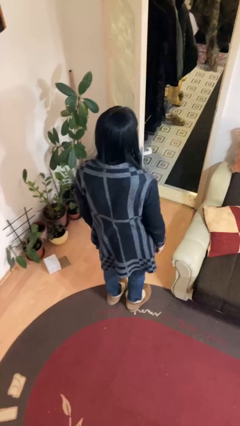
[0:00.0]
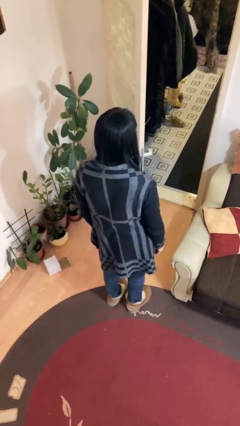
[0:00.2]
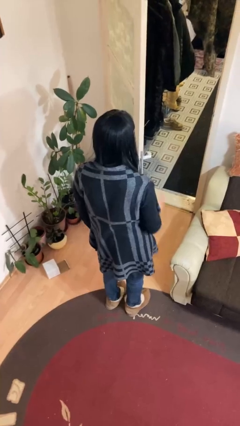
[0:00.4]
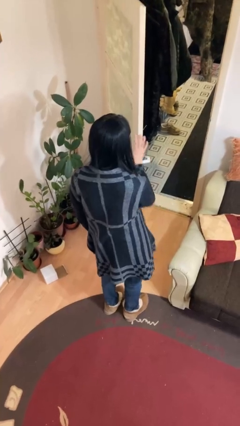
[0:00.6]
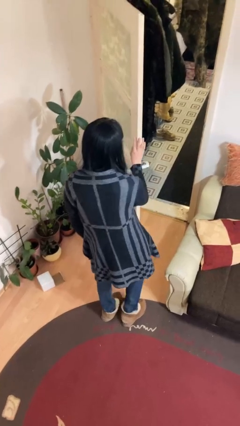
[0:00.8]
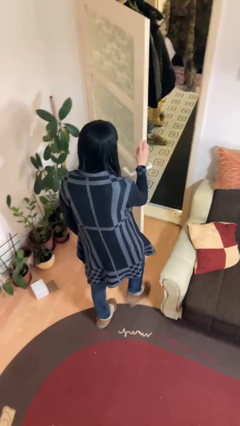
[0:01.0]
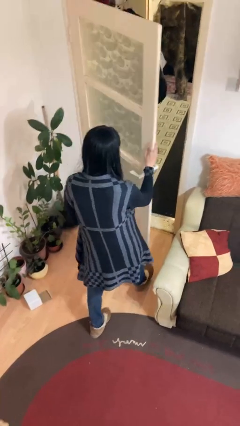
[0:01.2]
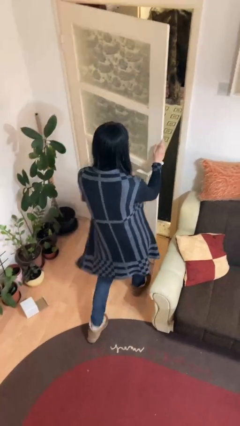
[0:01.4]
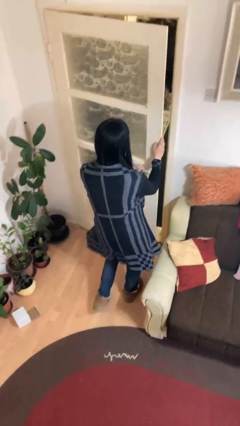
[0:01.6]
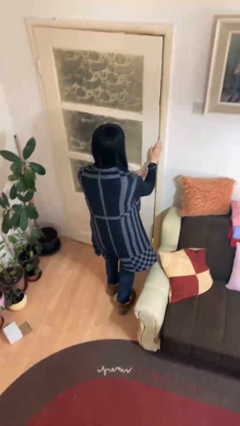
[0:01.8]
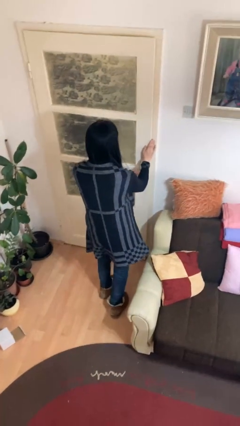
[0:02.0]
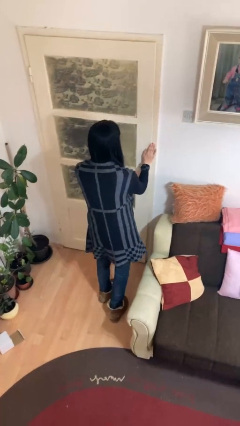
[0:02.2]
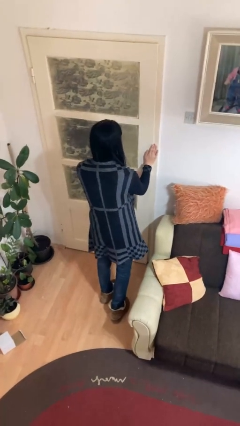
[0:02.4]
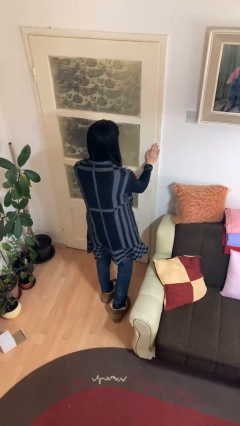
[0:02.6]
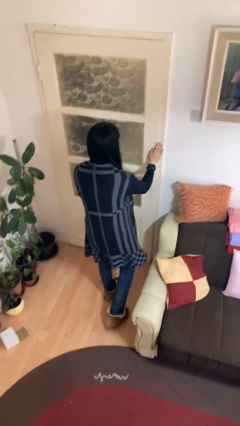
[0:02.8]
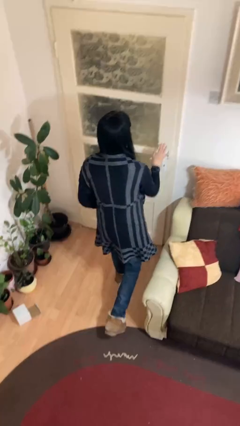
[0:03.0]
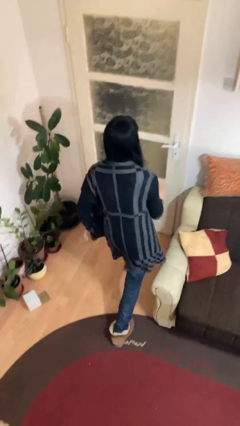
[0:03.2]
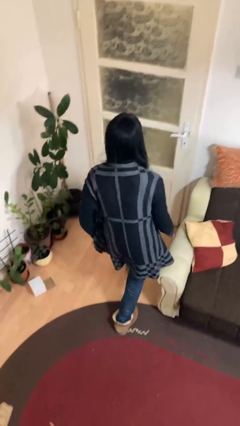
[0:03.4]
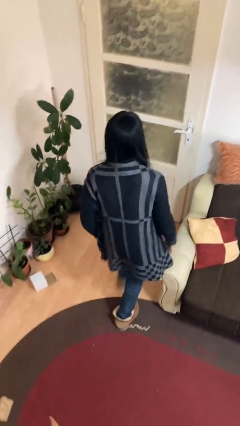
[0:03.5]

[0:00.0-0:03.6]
person closes facility door

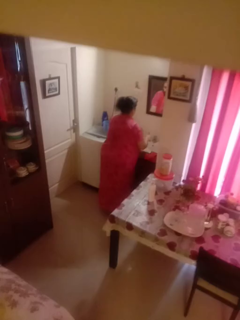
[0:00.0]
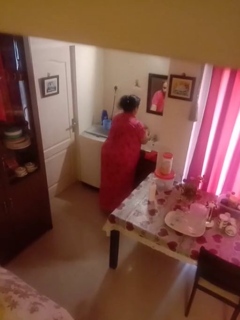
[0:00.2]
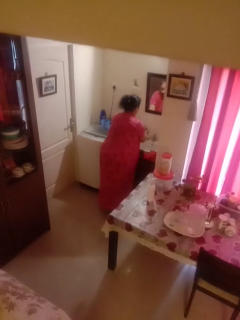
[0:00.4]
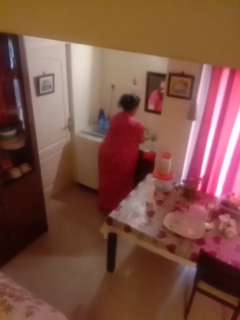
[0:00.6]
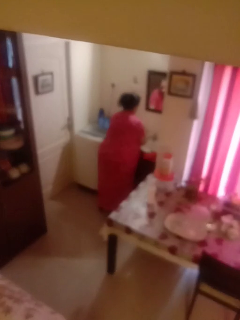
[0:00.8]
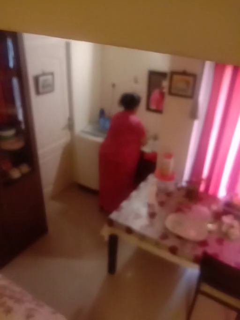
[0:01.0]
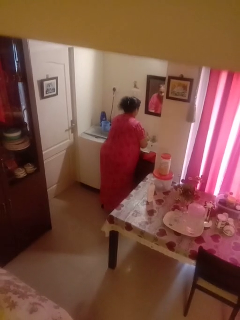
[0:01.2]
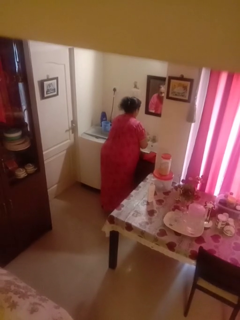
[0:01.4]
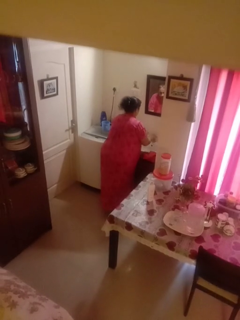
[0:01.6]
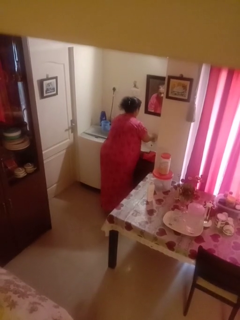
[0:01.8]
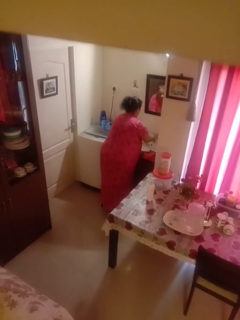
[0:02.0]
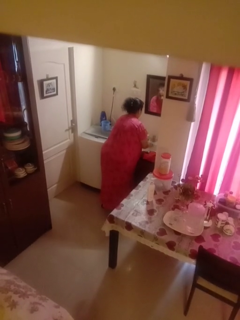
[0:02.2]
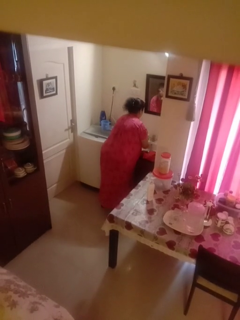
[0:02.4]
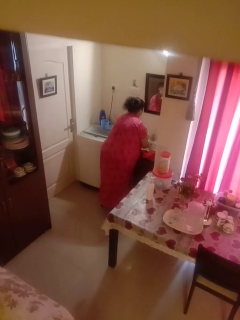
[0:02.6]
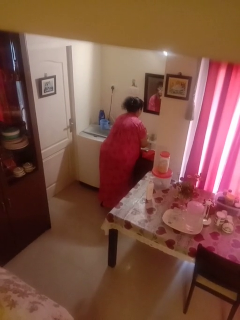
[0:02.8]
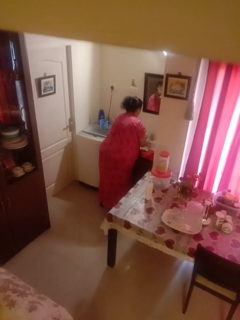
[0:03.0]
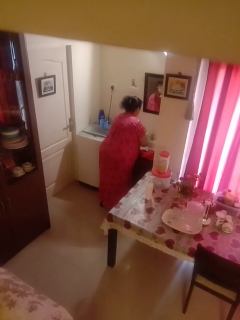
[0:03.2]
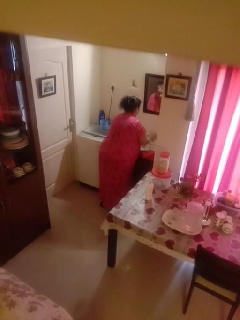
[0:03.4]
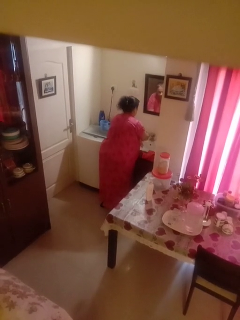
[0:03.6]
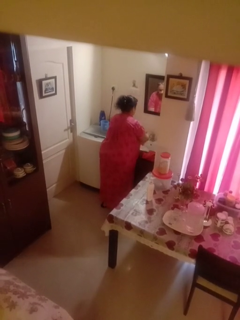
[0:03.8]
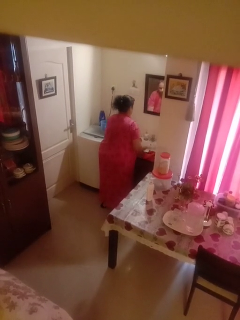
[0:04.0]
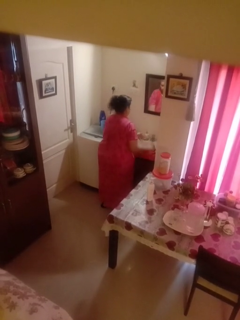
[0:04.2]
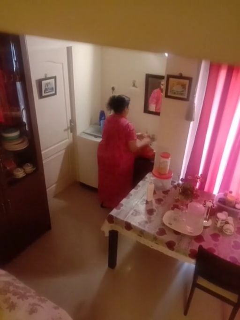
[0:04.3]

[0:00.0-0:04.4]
person washes hands

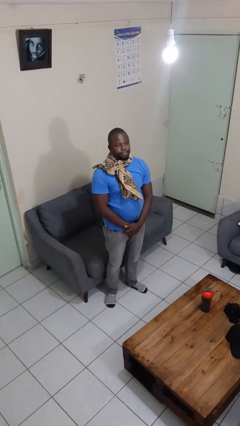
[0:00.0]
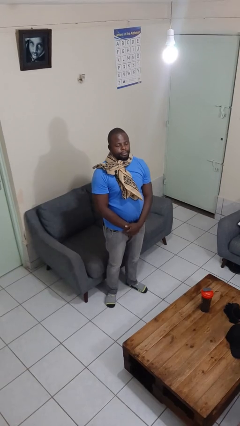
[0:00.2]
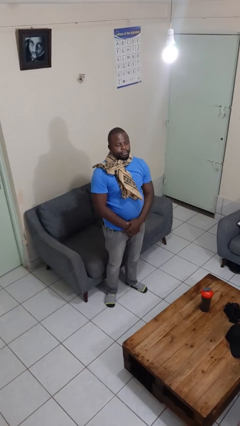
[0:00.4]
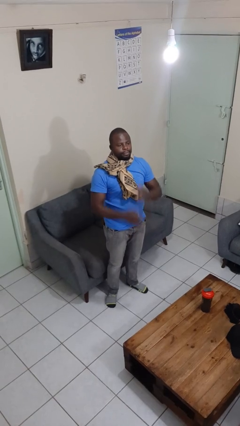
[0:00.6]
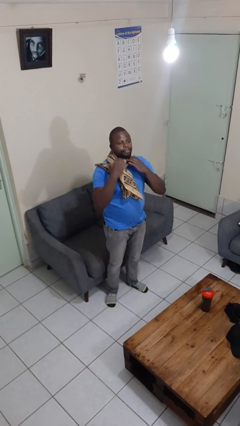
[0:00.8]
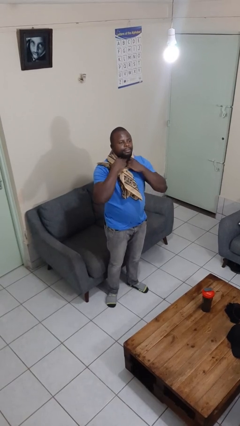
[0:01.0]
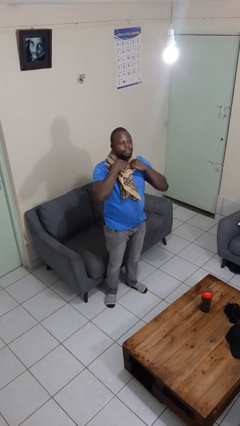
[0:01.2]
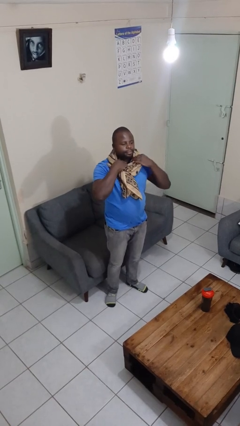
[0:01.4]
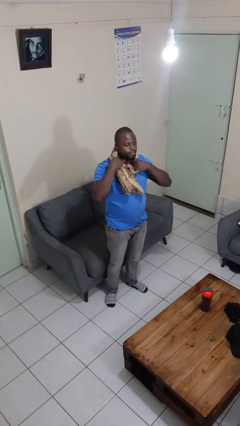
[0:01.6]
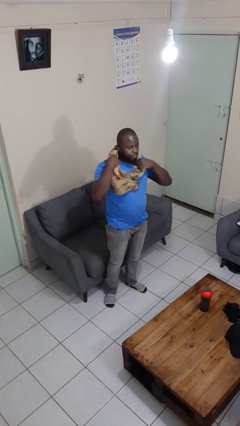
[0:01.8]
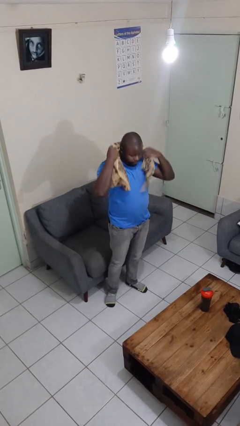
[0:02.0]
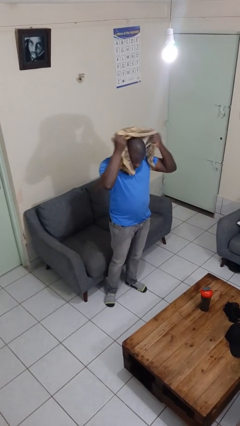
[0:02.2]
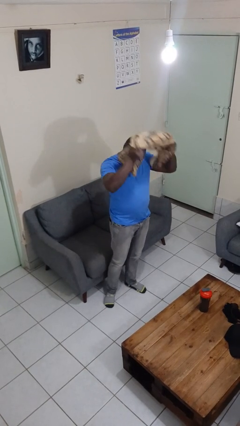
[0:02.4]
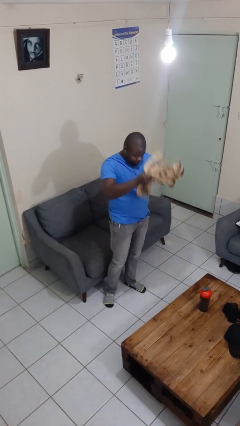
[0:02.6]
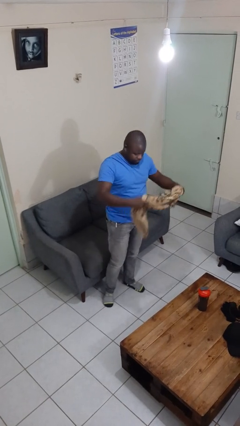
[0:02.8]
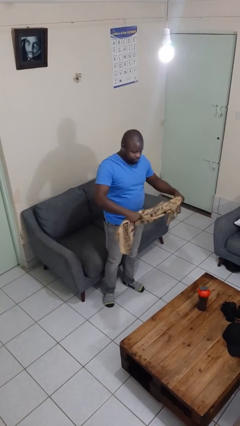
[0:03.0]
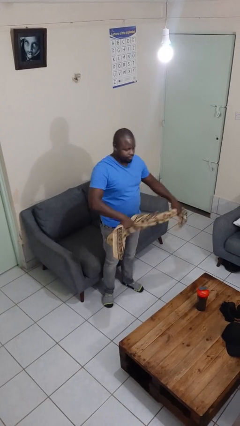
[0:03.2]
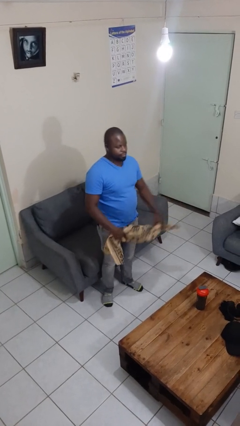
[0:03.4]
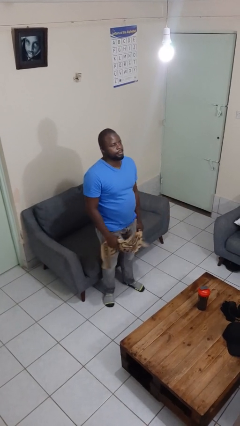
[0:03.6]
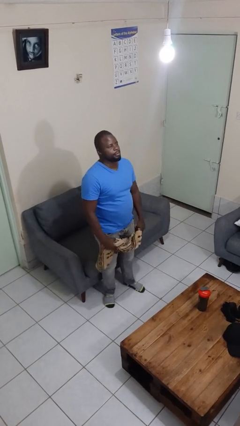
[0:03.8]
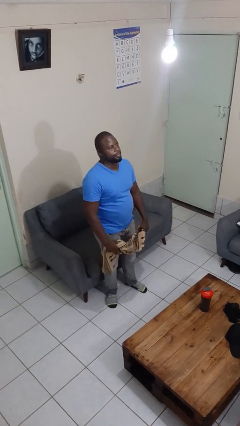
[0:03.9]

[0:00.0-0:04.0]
person takes off scarf

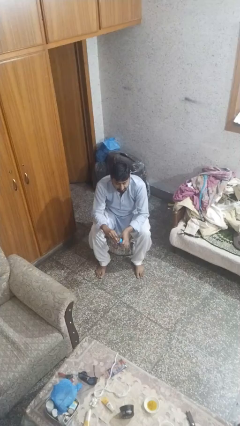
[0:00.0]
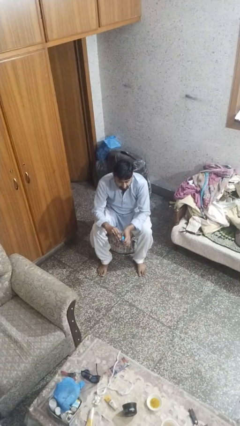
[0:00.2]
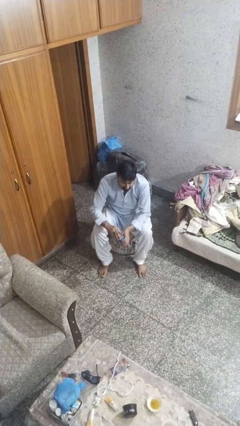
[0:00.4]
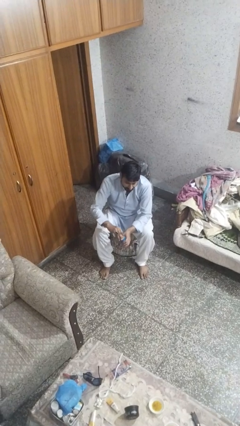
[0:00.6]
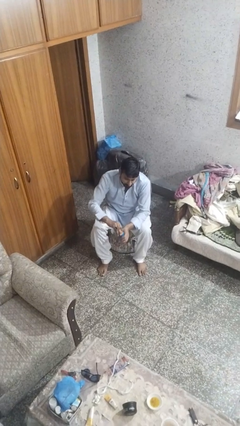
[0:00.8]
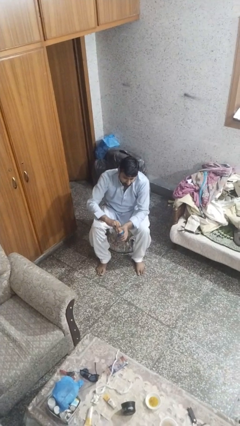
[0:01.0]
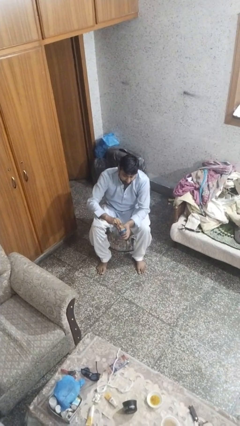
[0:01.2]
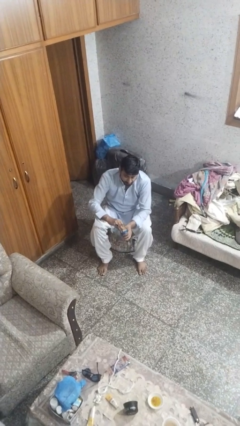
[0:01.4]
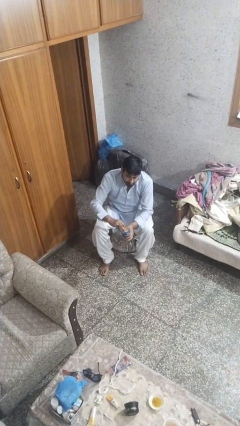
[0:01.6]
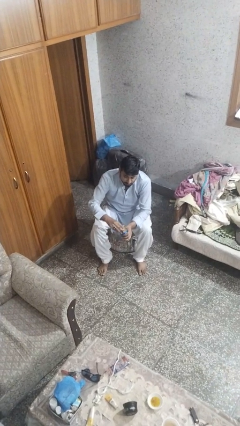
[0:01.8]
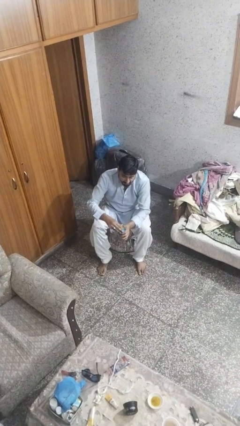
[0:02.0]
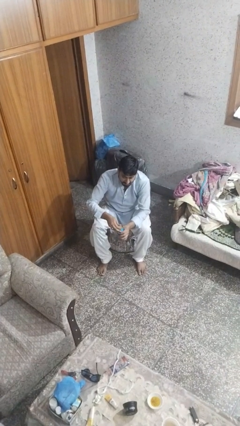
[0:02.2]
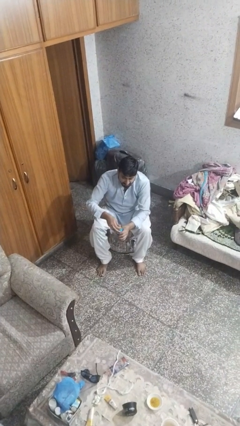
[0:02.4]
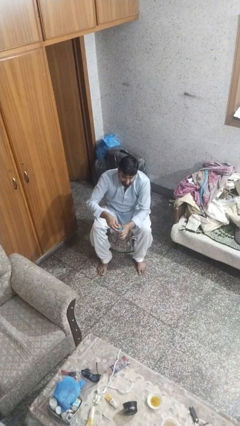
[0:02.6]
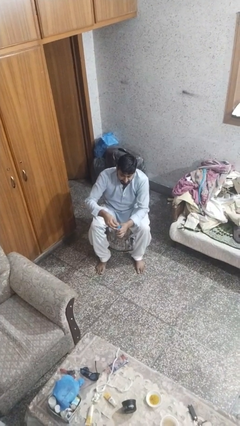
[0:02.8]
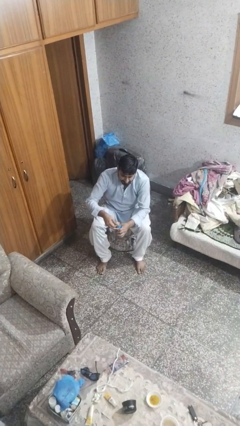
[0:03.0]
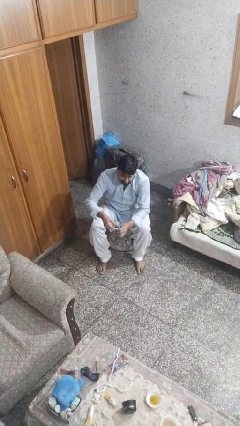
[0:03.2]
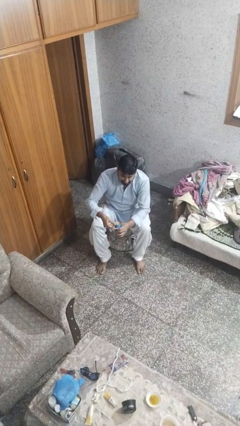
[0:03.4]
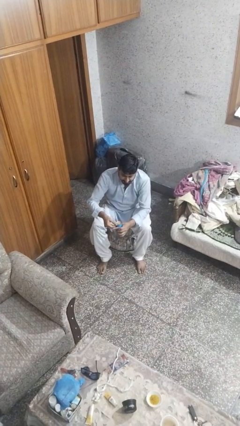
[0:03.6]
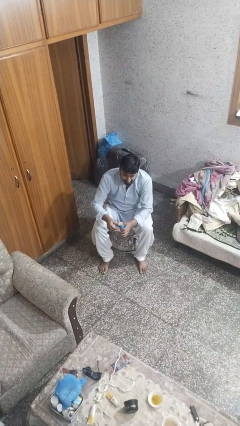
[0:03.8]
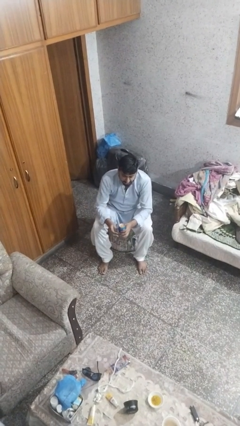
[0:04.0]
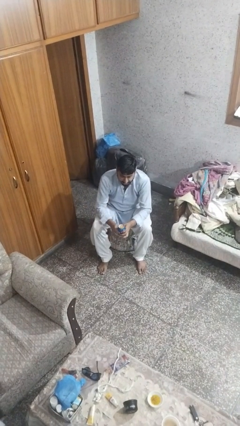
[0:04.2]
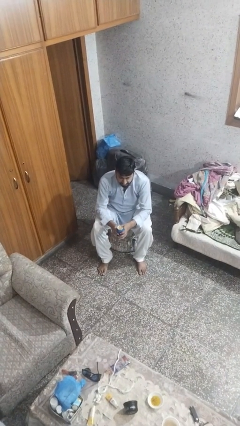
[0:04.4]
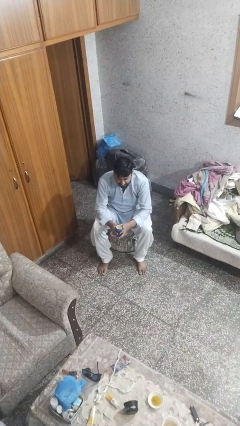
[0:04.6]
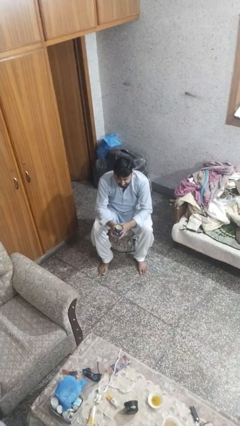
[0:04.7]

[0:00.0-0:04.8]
person opens beverage can

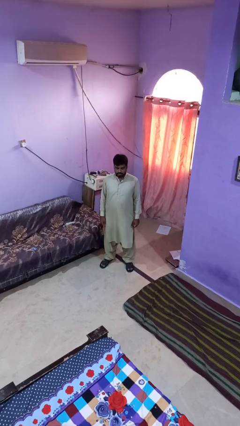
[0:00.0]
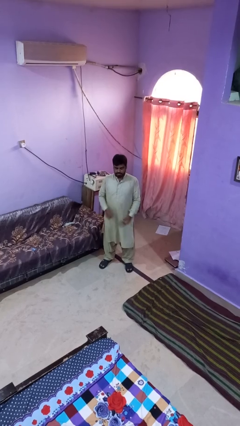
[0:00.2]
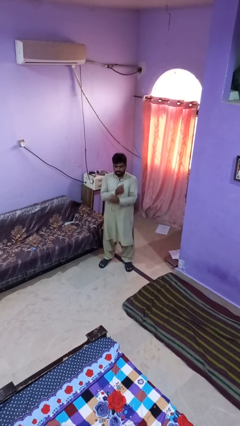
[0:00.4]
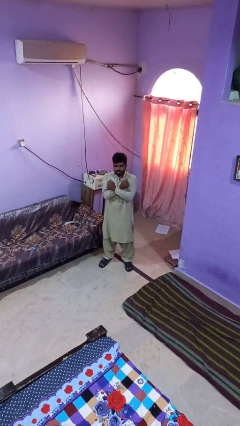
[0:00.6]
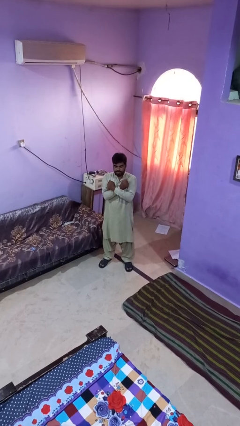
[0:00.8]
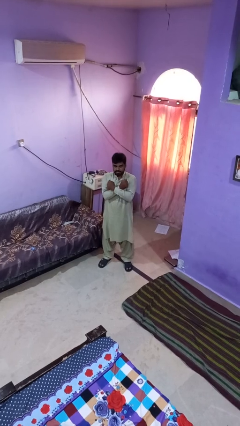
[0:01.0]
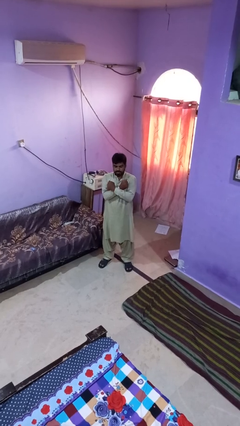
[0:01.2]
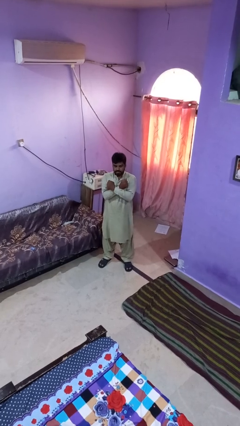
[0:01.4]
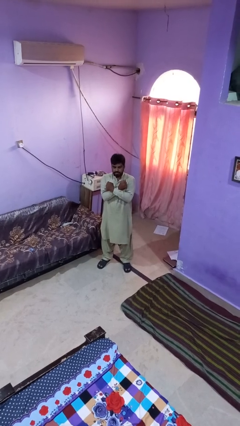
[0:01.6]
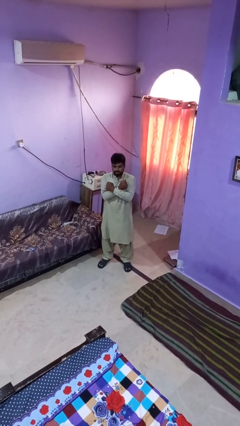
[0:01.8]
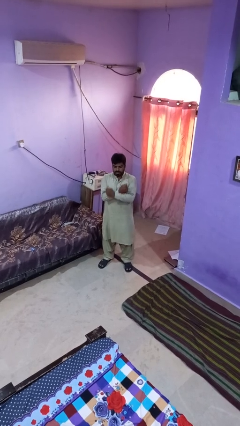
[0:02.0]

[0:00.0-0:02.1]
person gestures arms x

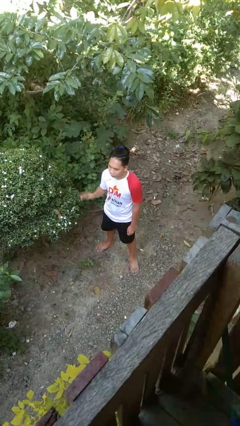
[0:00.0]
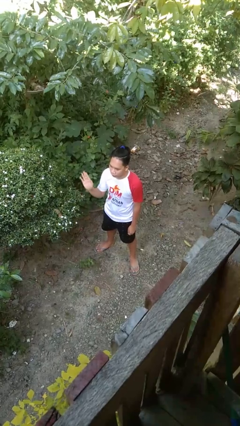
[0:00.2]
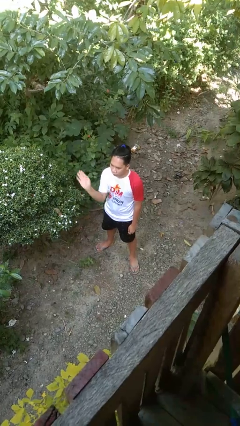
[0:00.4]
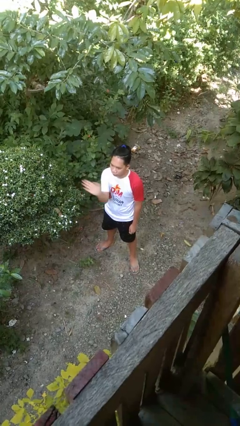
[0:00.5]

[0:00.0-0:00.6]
person gestures swipe left
